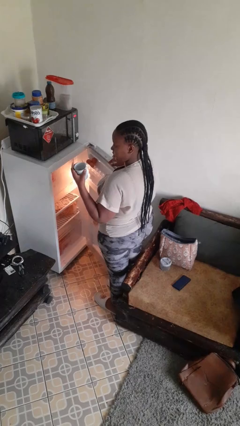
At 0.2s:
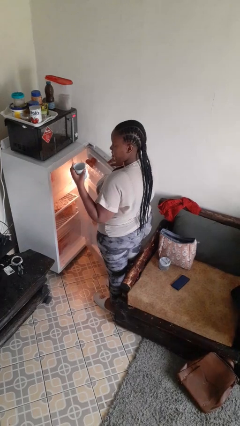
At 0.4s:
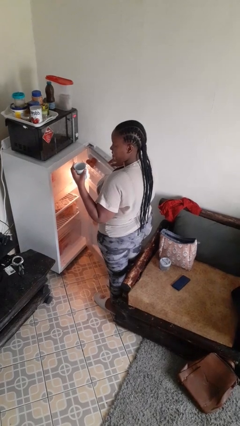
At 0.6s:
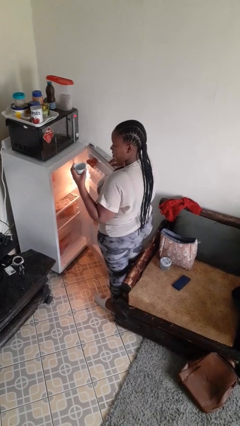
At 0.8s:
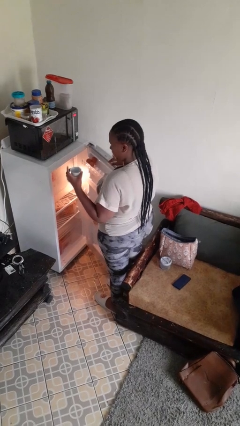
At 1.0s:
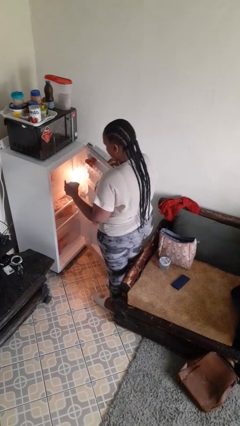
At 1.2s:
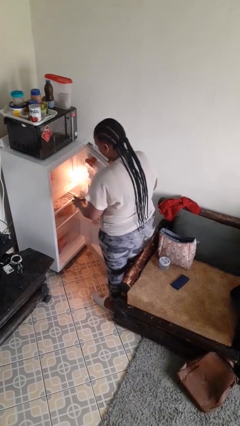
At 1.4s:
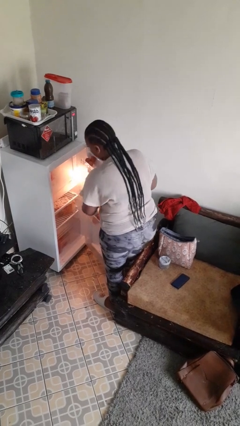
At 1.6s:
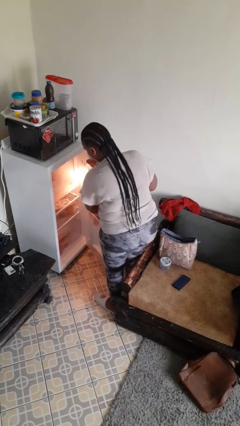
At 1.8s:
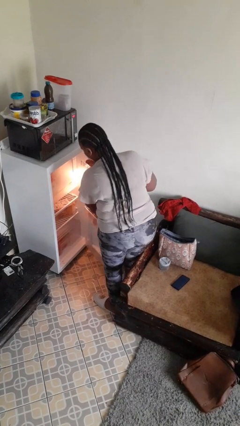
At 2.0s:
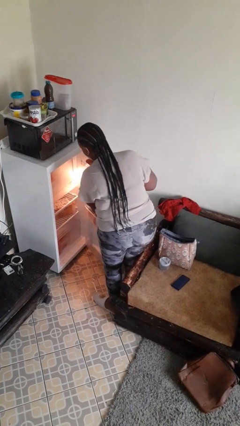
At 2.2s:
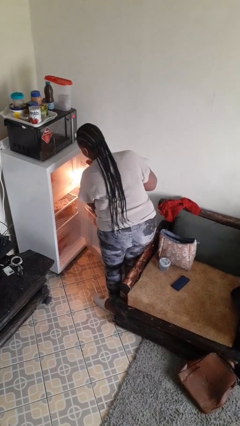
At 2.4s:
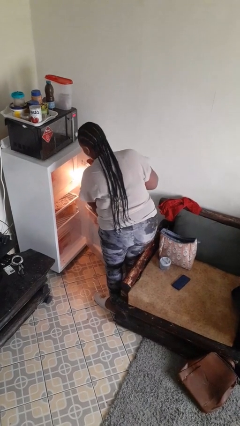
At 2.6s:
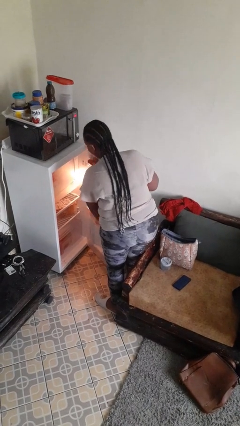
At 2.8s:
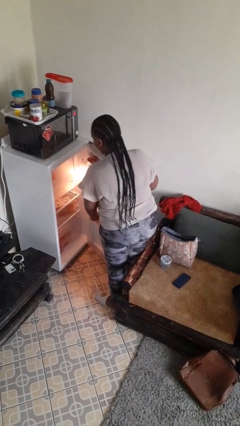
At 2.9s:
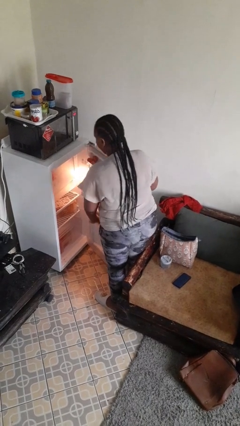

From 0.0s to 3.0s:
person puts object into refrigerator

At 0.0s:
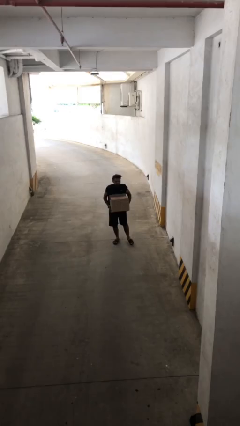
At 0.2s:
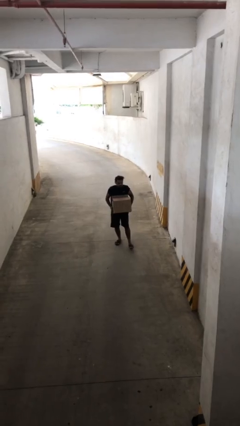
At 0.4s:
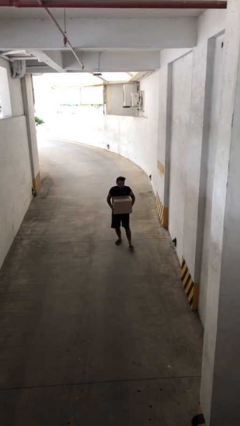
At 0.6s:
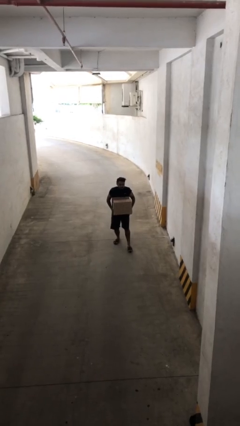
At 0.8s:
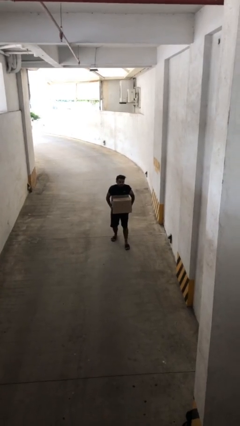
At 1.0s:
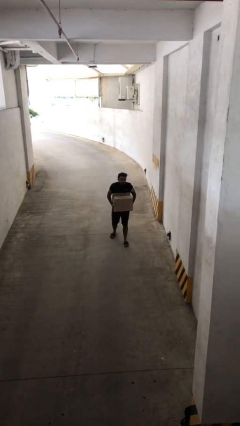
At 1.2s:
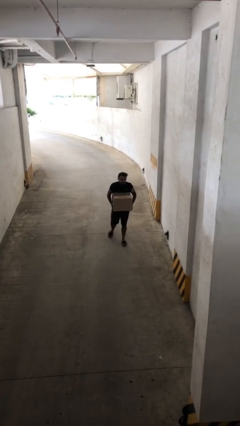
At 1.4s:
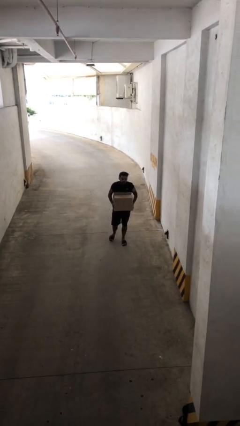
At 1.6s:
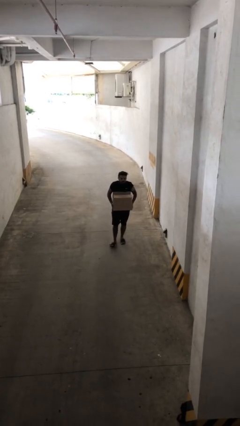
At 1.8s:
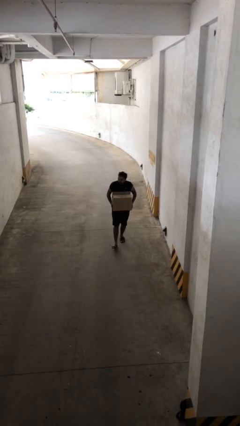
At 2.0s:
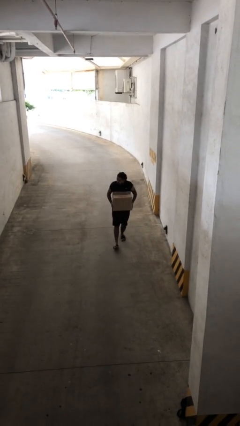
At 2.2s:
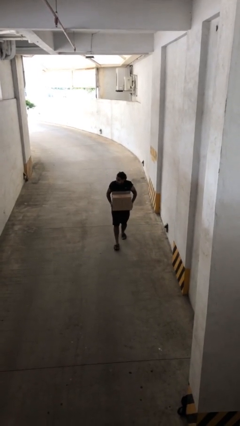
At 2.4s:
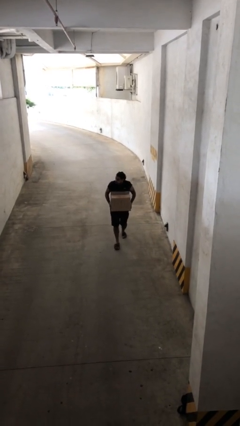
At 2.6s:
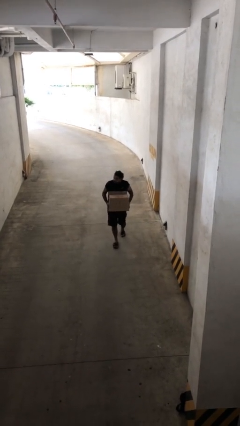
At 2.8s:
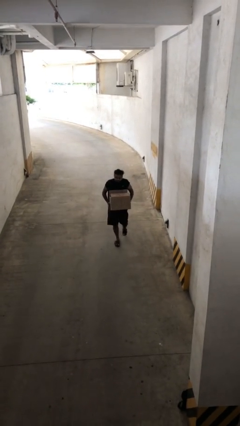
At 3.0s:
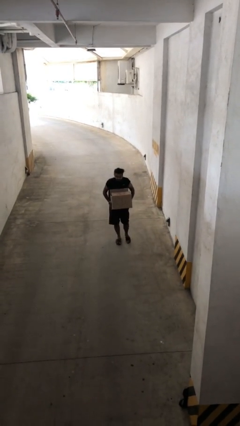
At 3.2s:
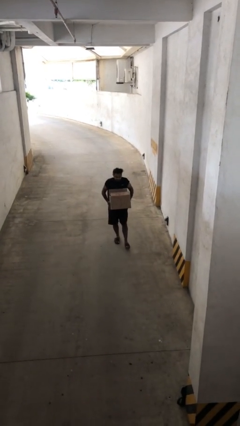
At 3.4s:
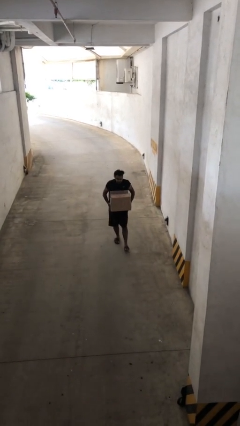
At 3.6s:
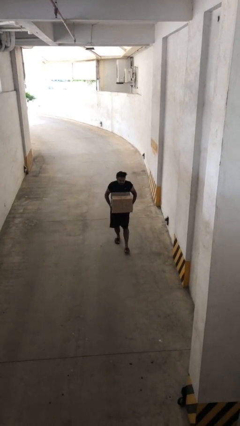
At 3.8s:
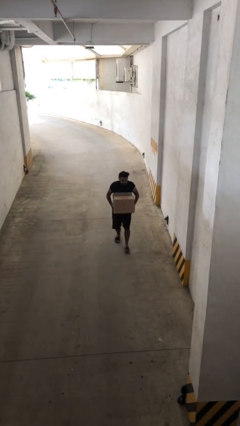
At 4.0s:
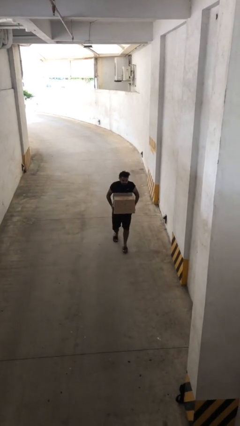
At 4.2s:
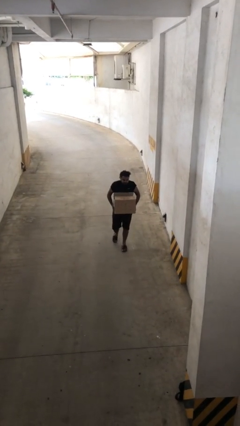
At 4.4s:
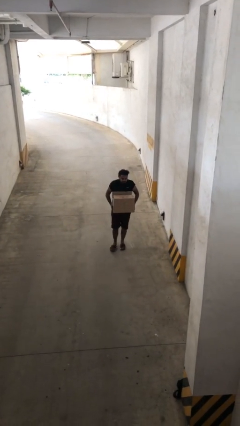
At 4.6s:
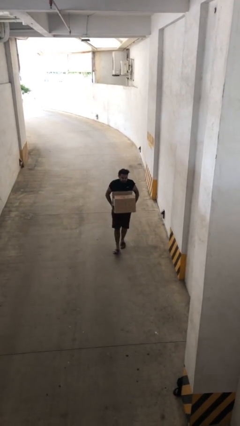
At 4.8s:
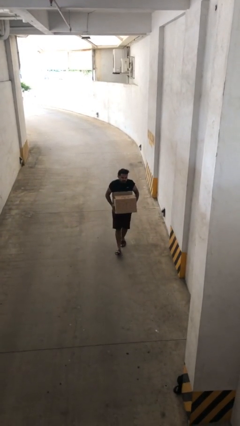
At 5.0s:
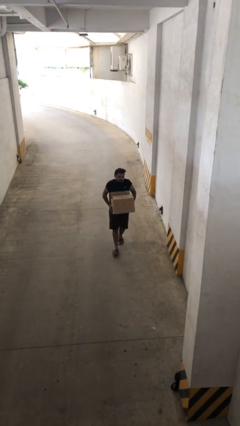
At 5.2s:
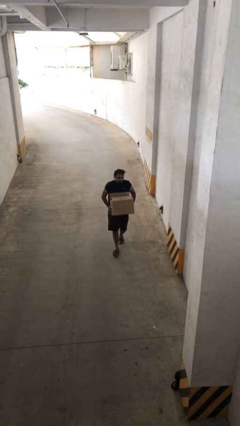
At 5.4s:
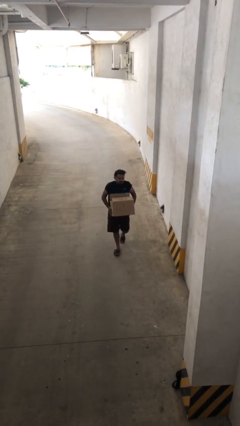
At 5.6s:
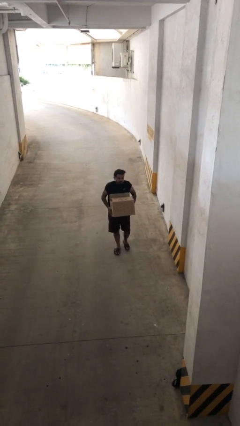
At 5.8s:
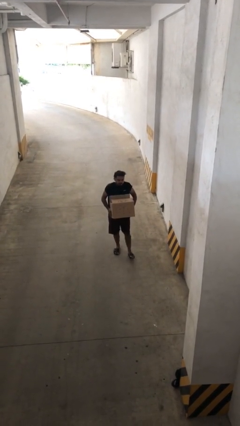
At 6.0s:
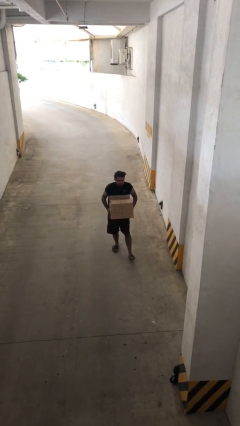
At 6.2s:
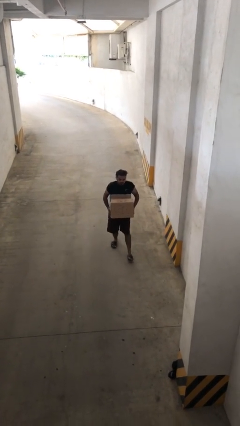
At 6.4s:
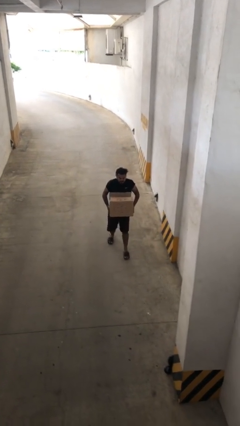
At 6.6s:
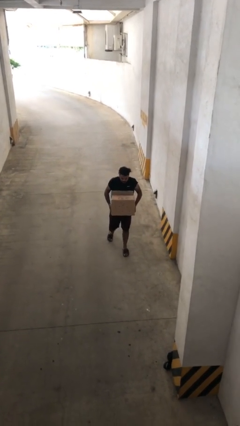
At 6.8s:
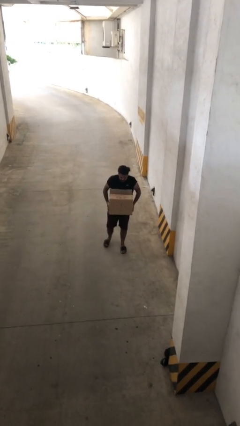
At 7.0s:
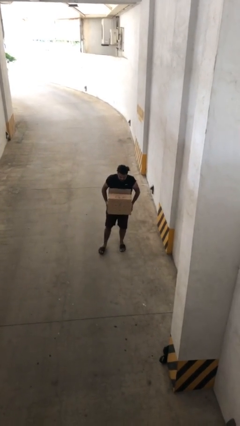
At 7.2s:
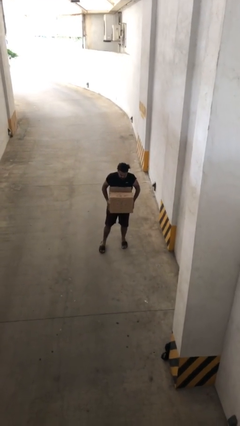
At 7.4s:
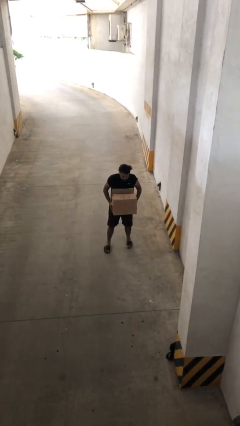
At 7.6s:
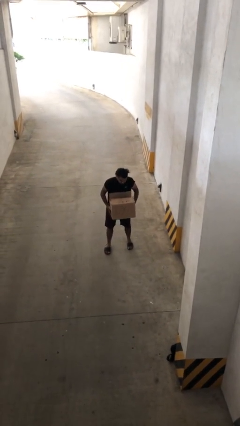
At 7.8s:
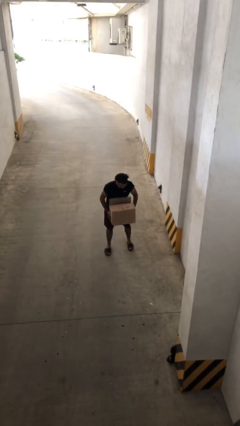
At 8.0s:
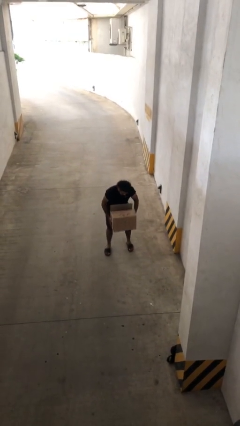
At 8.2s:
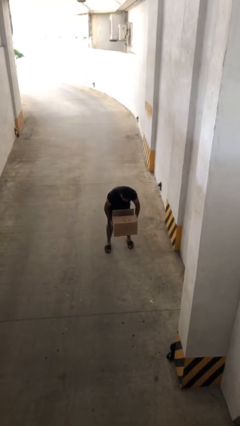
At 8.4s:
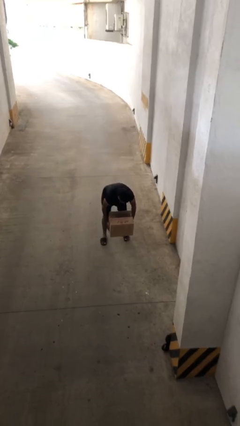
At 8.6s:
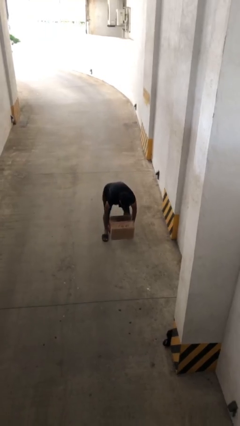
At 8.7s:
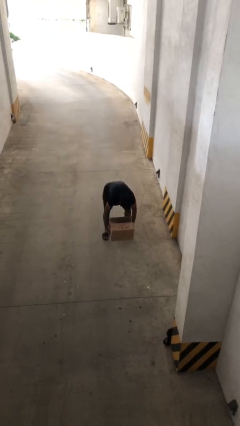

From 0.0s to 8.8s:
person carries heavy object

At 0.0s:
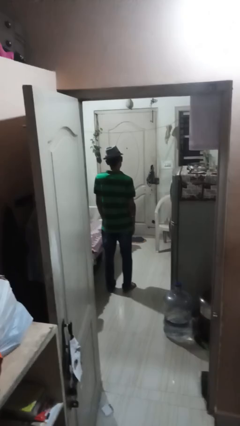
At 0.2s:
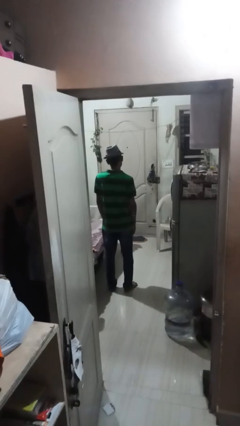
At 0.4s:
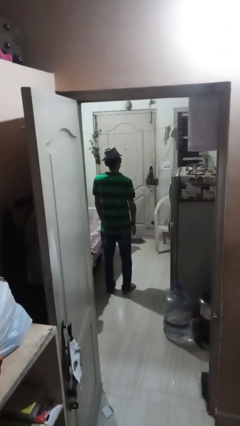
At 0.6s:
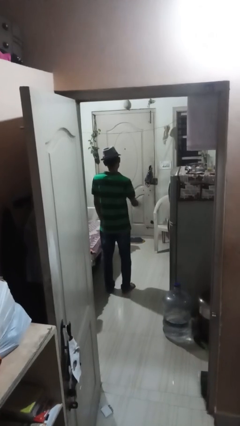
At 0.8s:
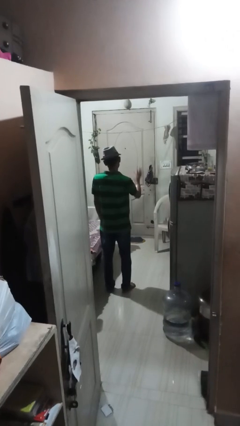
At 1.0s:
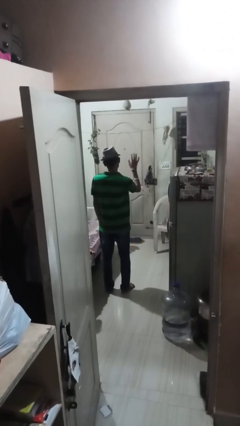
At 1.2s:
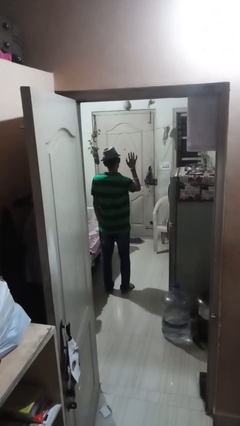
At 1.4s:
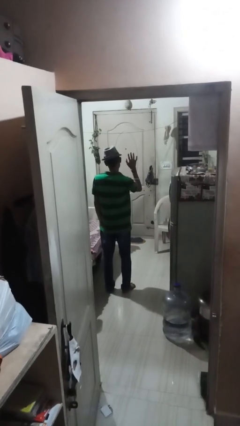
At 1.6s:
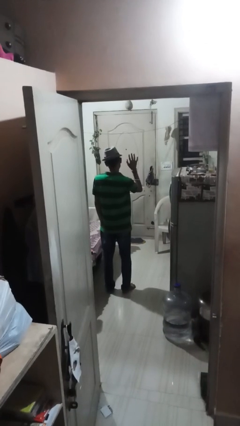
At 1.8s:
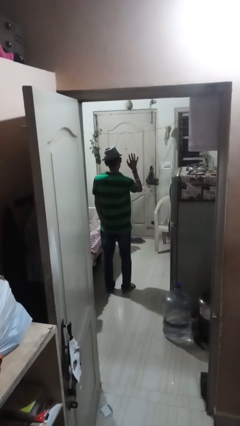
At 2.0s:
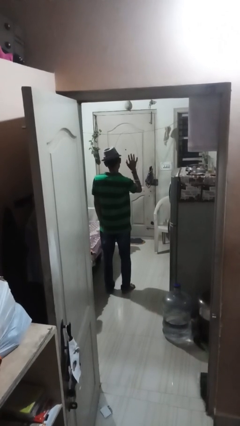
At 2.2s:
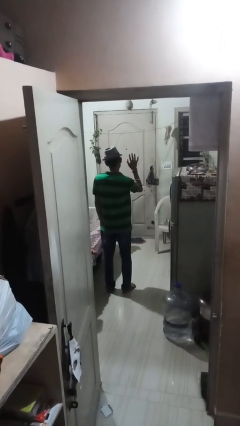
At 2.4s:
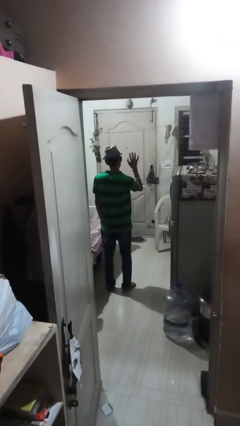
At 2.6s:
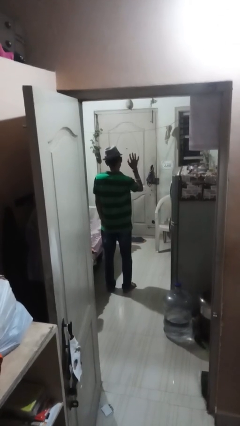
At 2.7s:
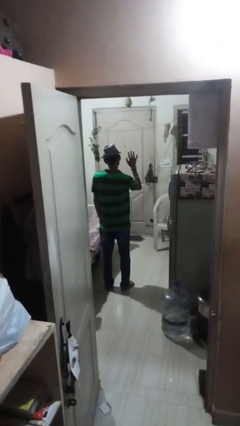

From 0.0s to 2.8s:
person gestures number five

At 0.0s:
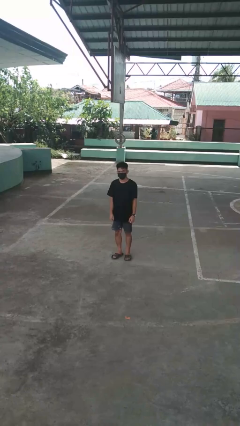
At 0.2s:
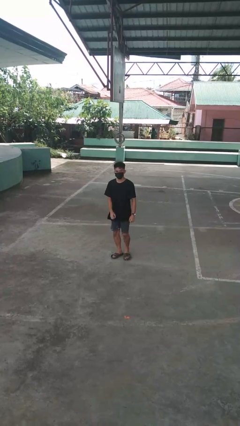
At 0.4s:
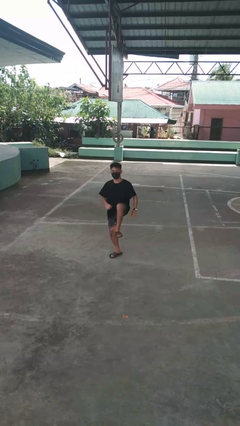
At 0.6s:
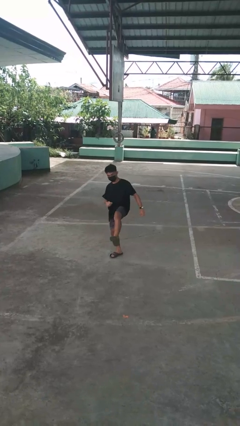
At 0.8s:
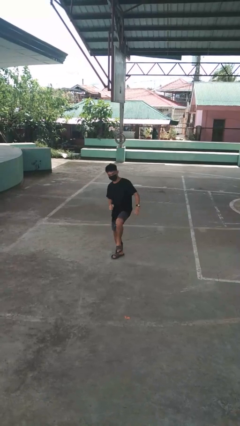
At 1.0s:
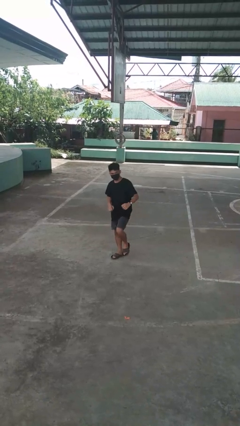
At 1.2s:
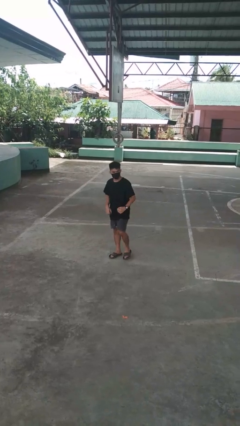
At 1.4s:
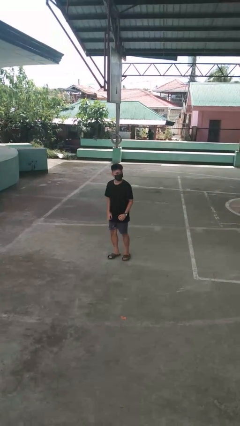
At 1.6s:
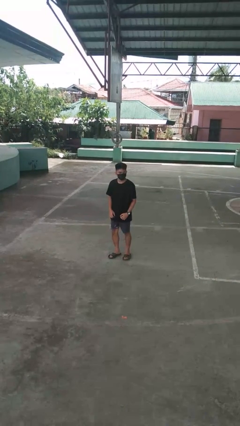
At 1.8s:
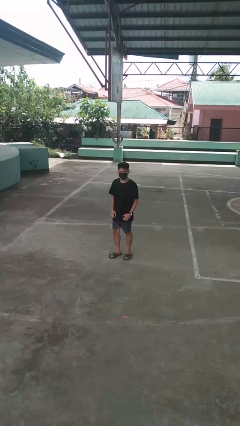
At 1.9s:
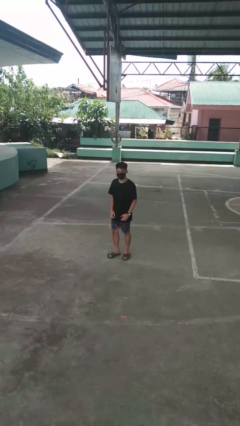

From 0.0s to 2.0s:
person karate kicks

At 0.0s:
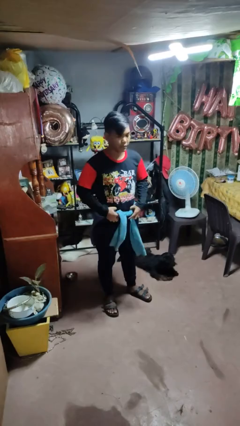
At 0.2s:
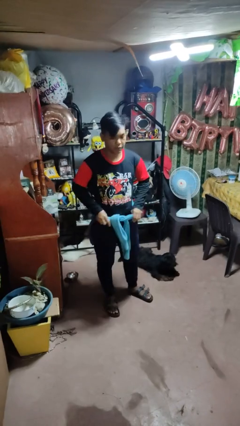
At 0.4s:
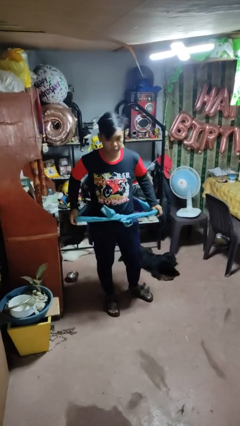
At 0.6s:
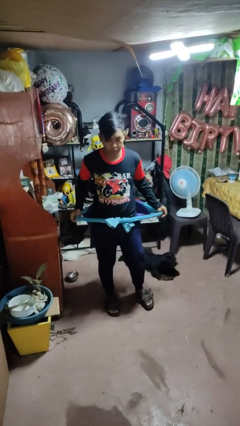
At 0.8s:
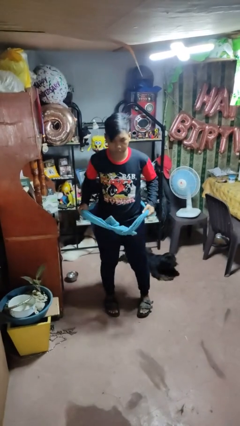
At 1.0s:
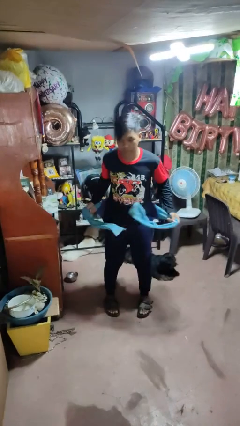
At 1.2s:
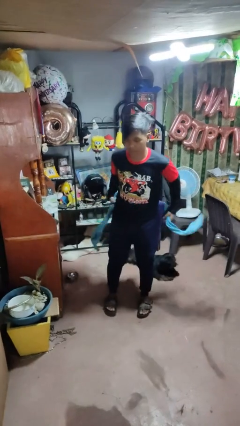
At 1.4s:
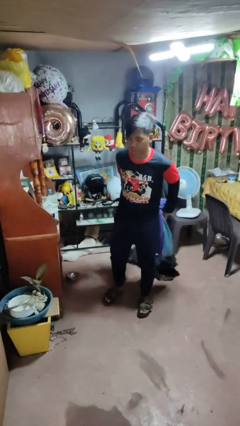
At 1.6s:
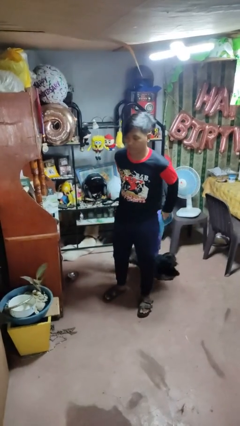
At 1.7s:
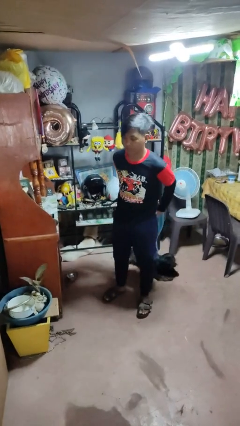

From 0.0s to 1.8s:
person unties jacket around waist
